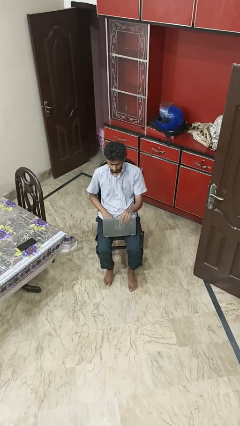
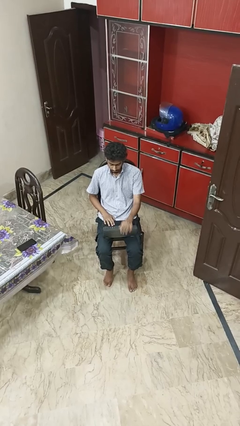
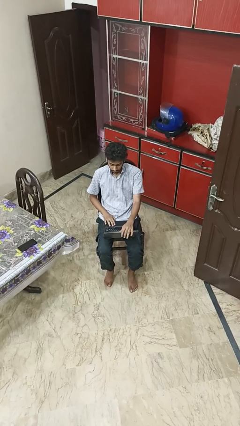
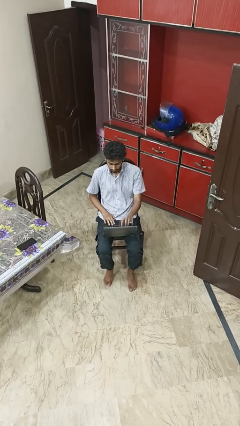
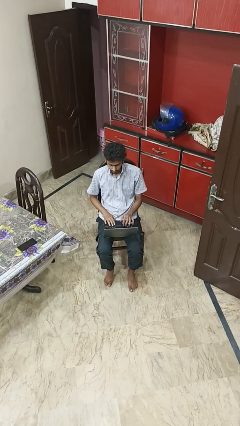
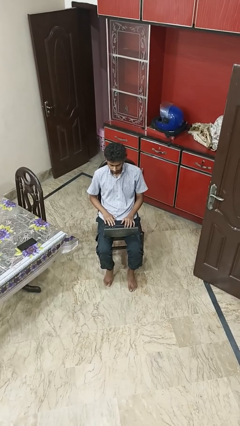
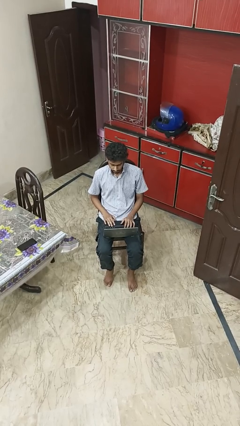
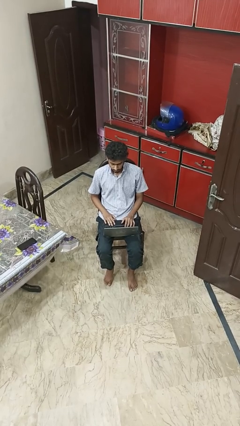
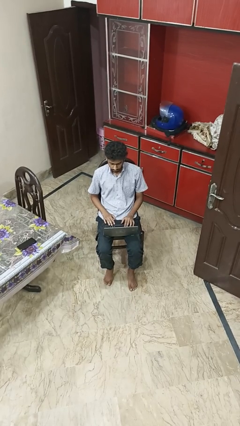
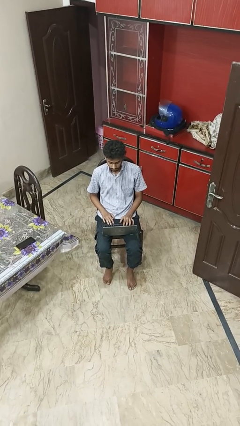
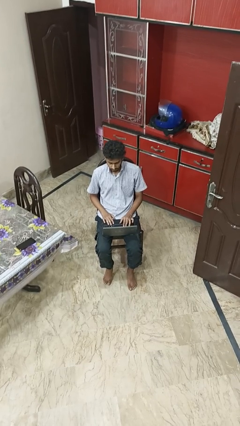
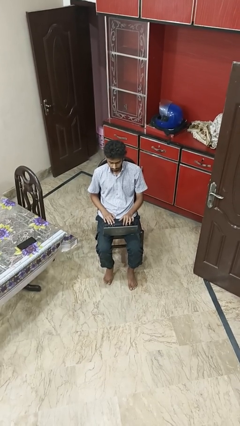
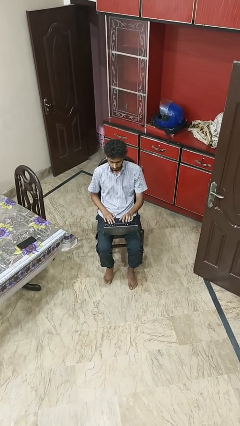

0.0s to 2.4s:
person opens laptop

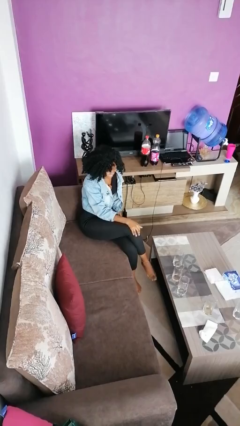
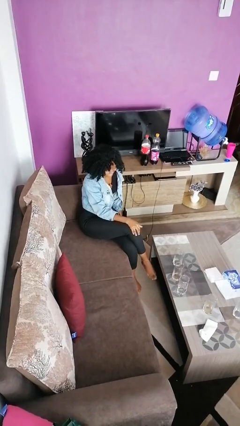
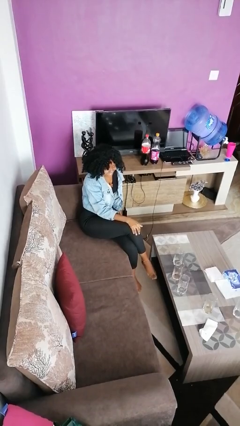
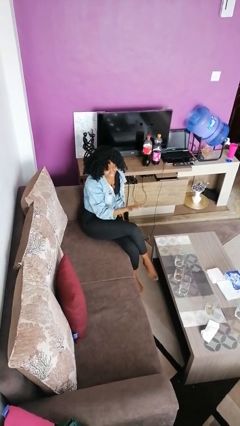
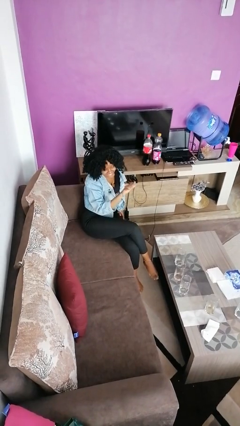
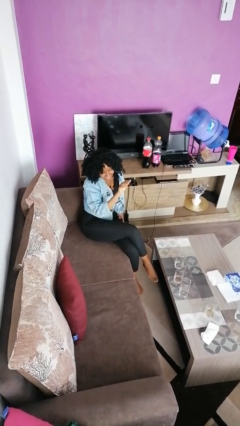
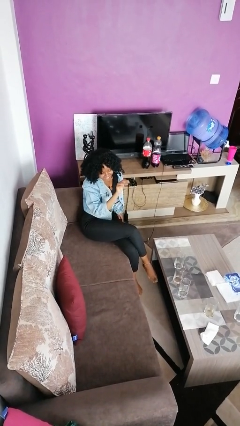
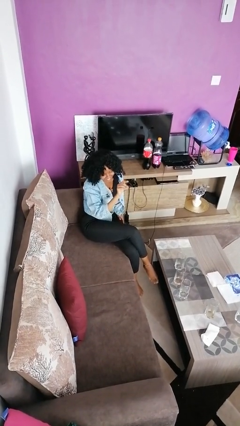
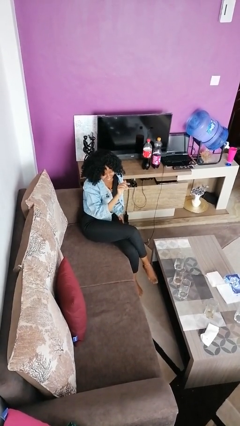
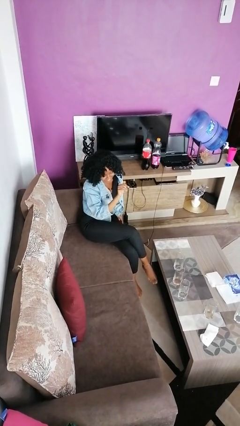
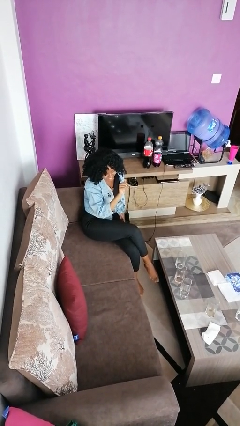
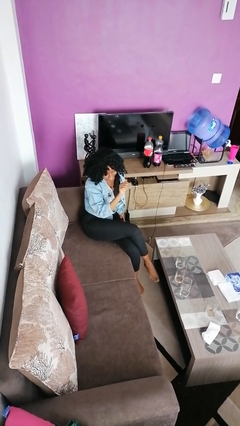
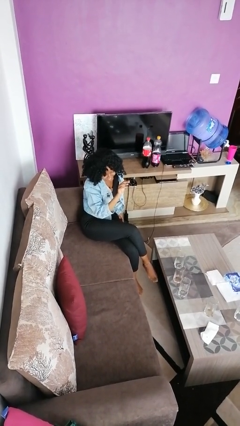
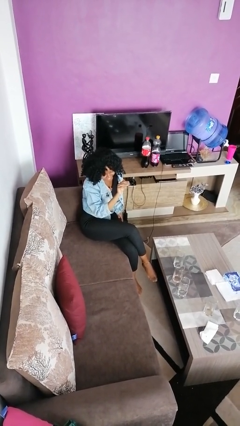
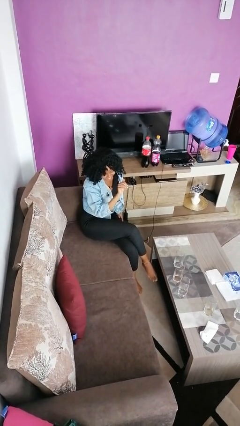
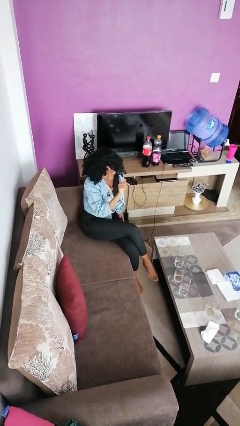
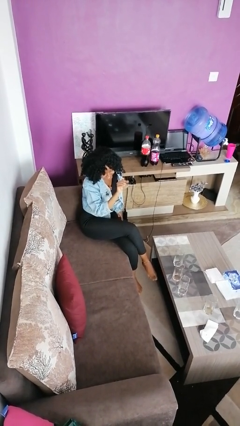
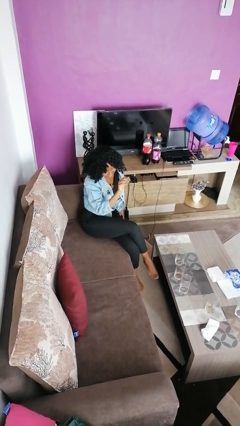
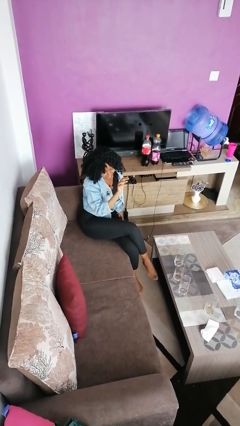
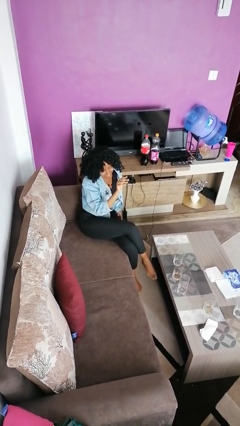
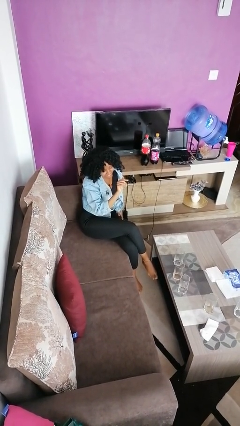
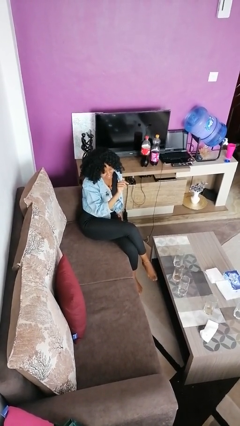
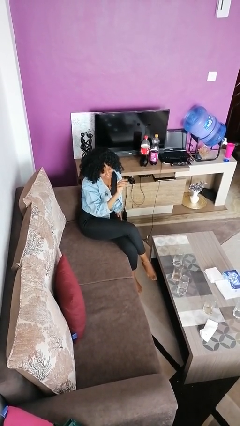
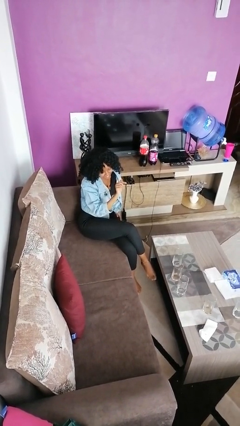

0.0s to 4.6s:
person gestures come here

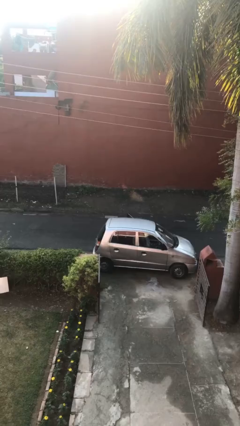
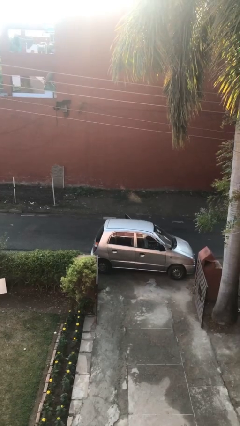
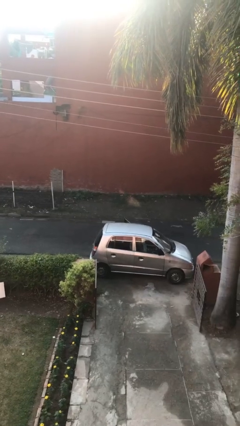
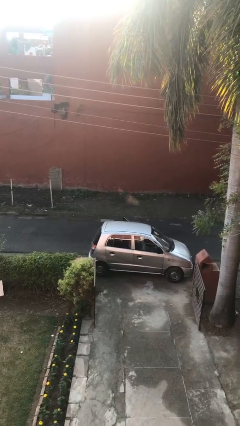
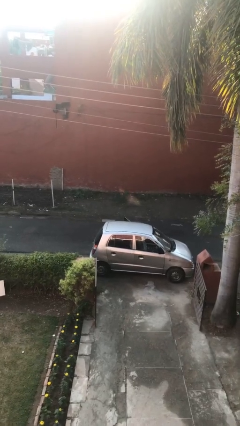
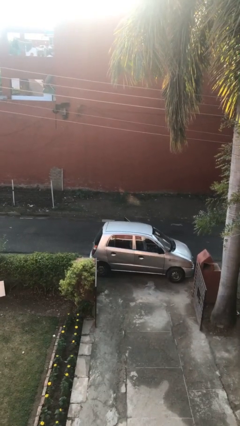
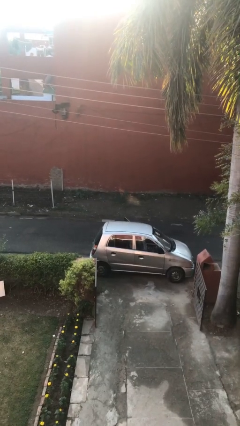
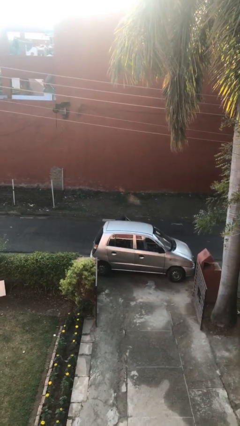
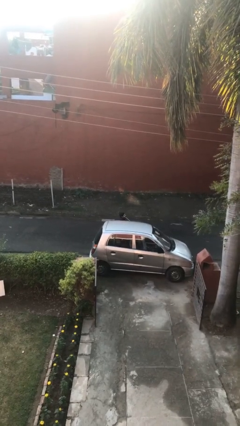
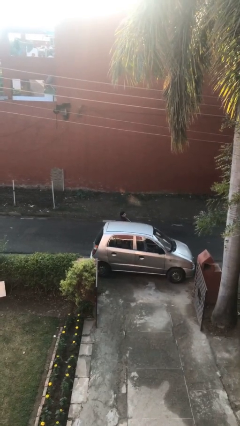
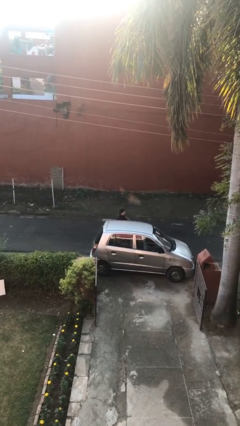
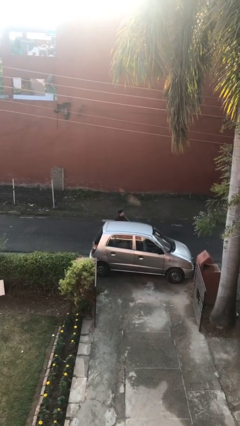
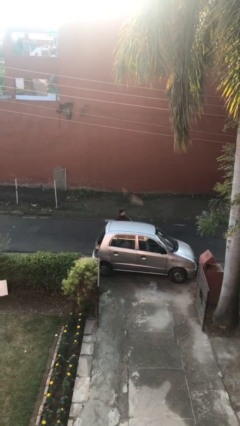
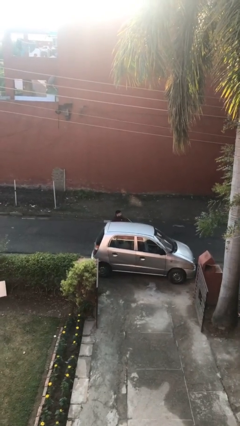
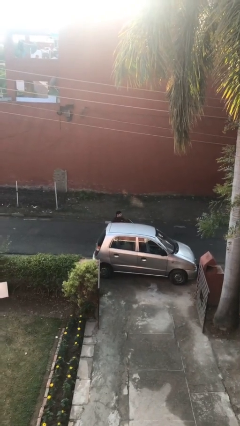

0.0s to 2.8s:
person exits car

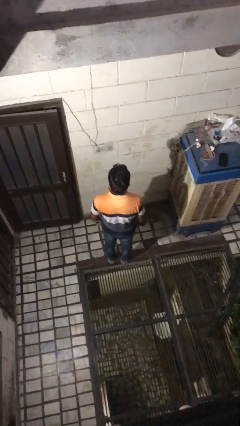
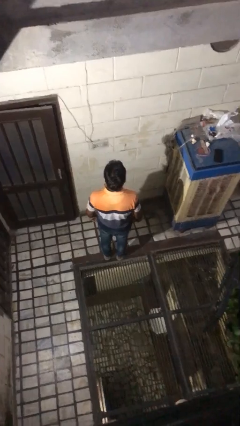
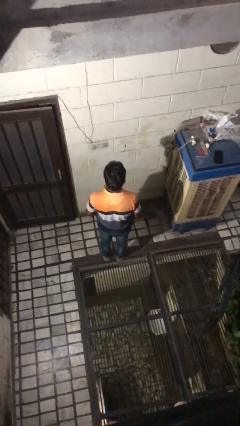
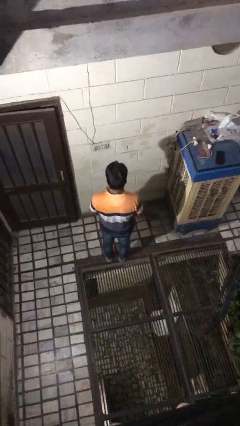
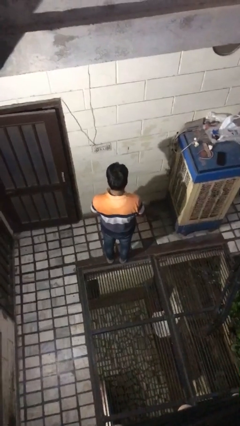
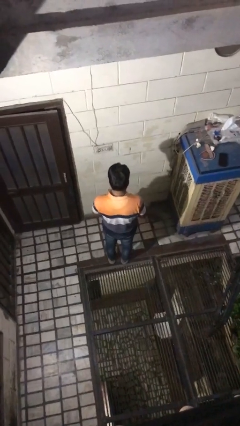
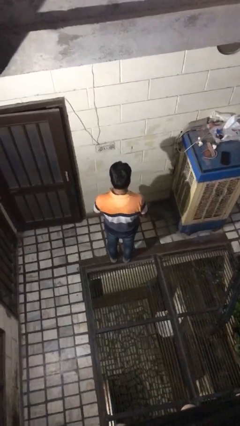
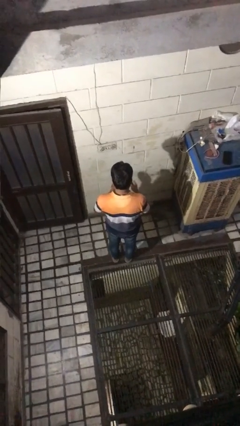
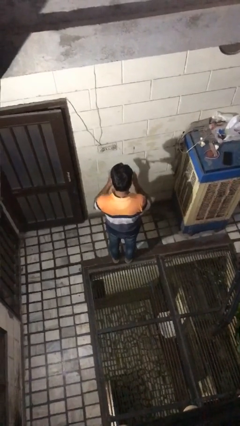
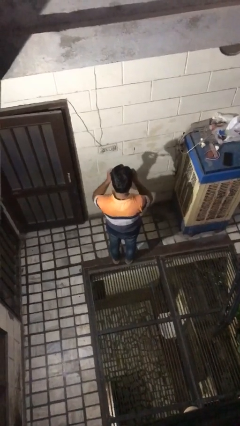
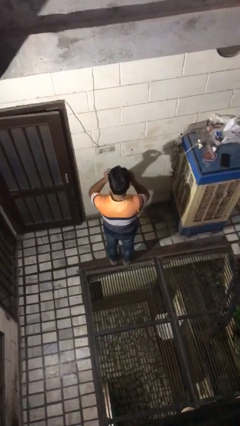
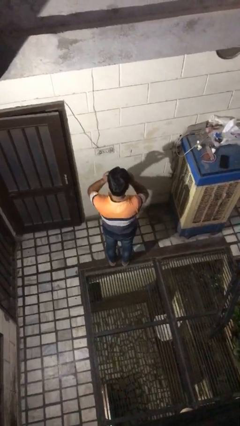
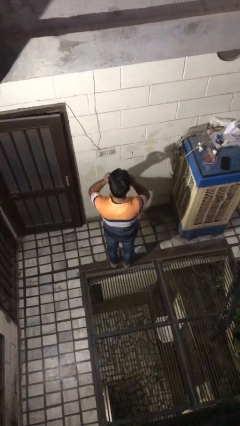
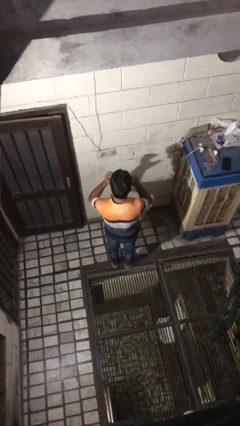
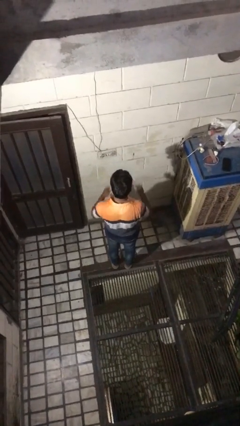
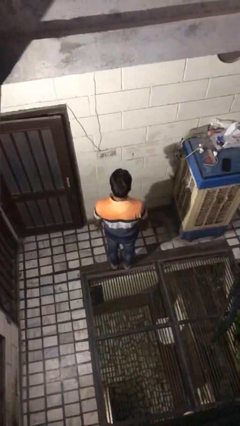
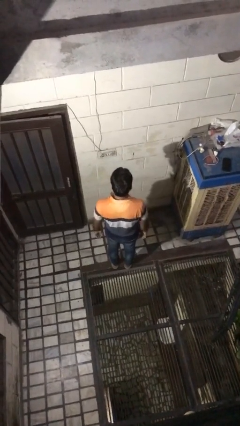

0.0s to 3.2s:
person puts on glasses

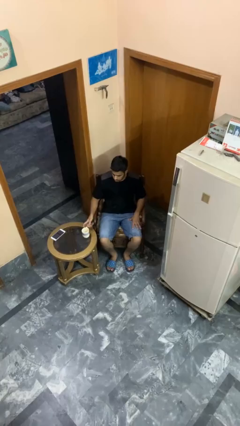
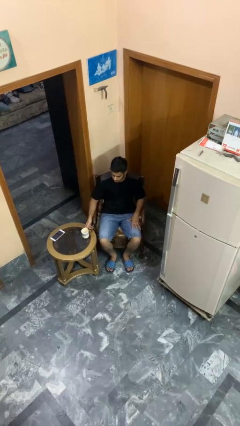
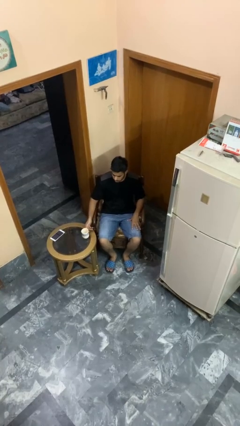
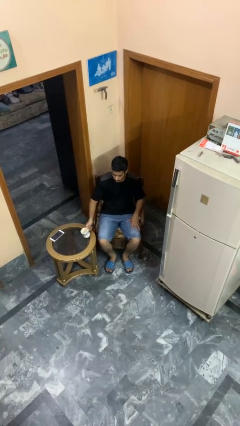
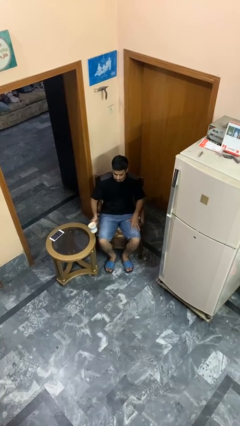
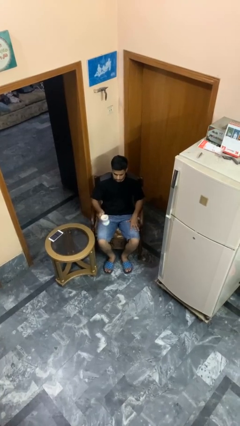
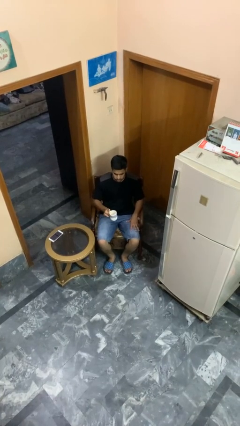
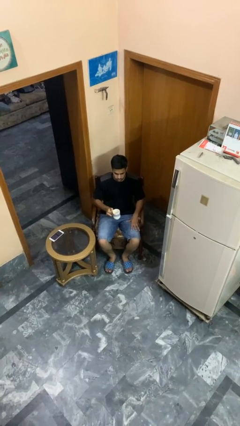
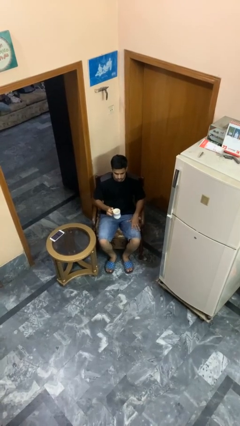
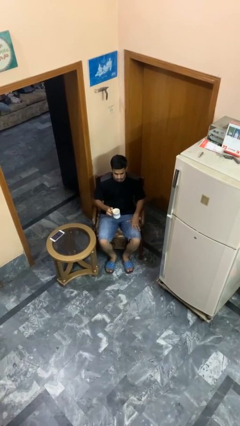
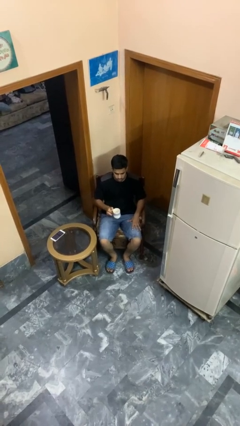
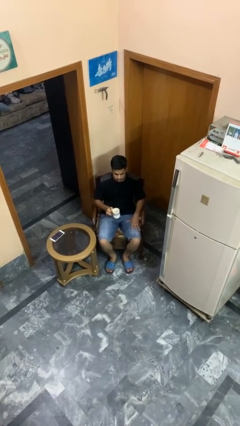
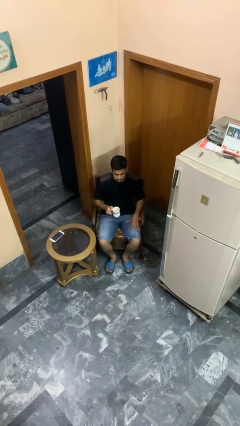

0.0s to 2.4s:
person picks up object from table

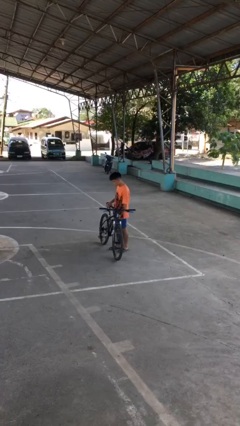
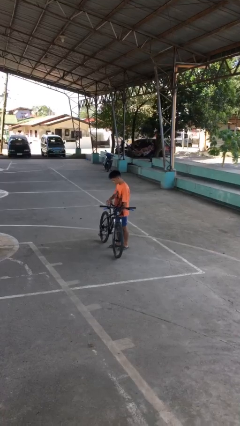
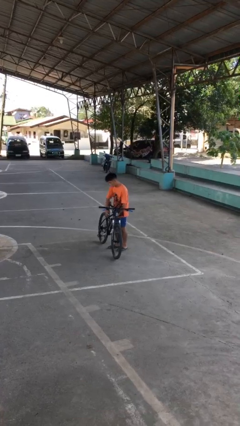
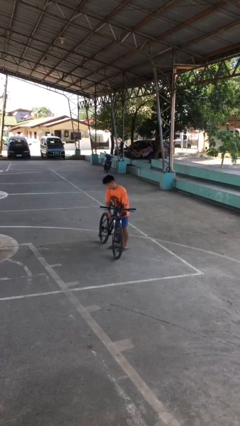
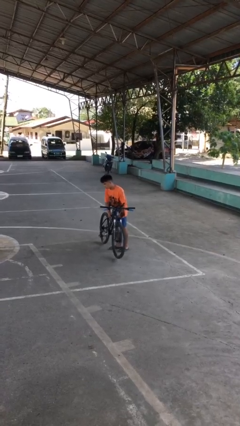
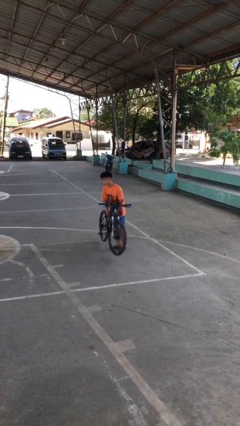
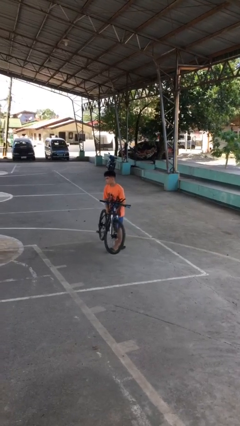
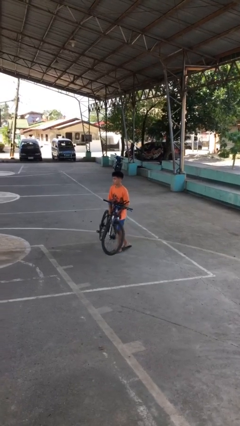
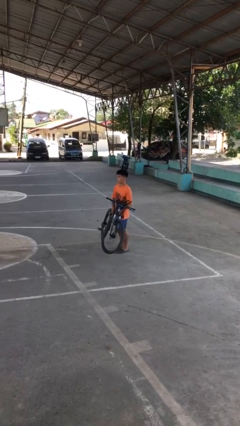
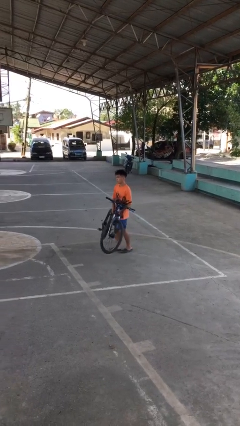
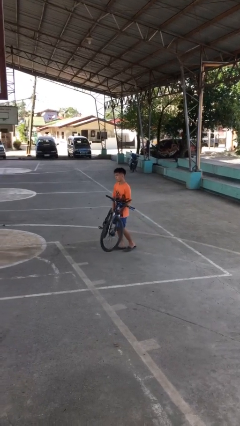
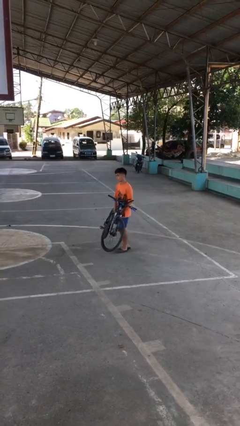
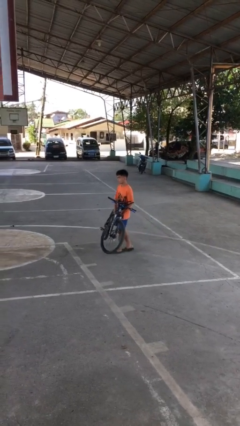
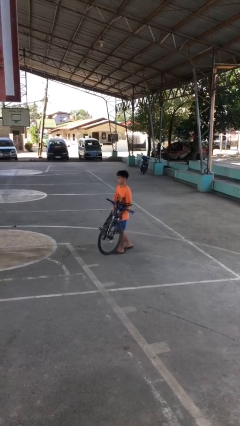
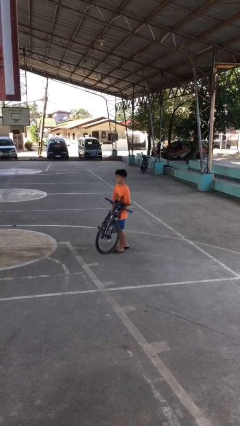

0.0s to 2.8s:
person carries bicycle
